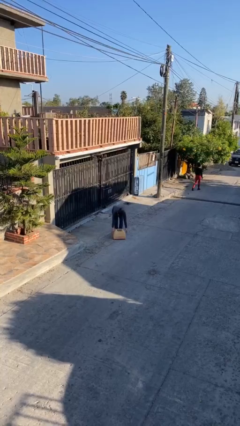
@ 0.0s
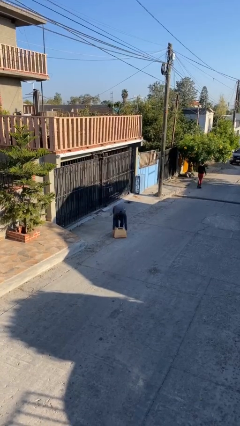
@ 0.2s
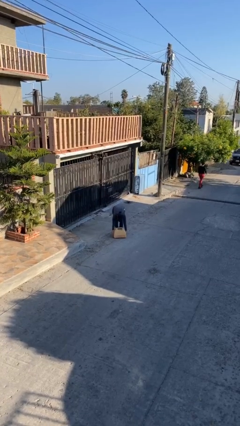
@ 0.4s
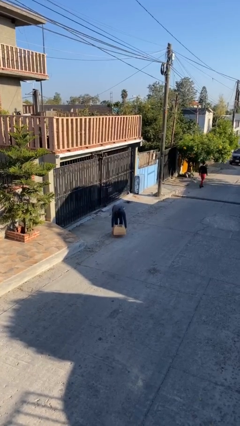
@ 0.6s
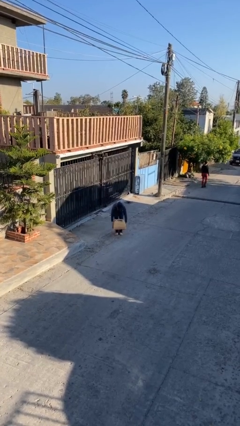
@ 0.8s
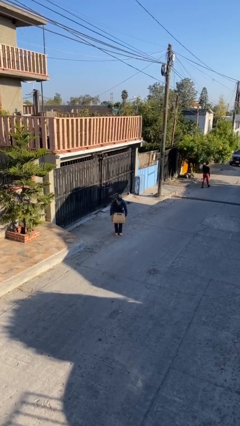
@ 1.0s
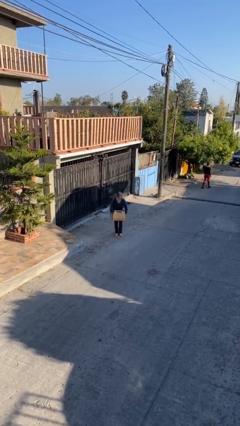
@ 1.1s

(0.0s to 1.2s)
person picks up object from floor

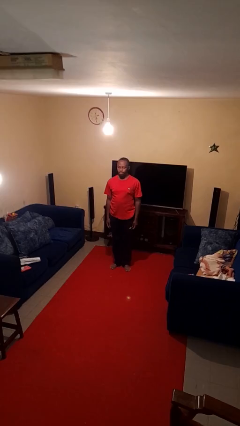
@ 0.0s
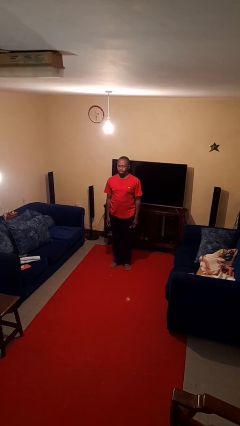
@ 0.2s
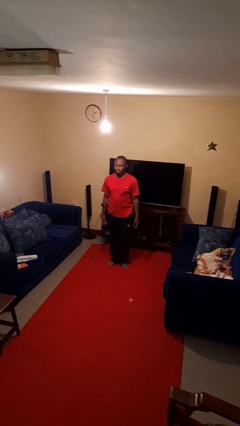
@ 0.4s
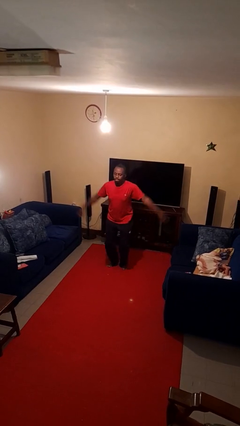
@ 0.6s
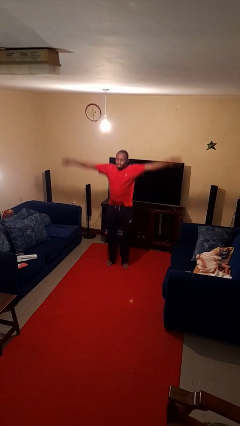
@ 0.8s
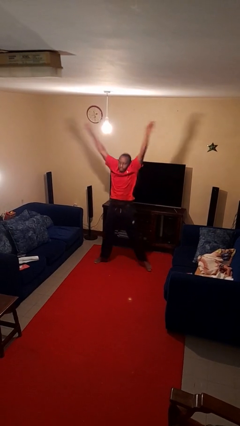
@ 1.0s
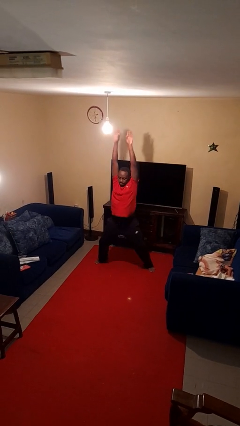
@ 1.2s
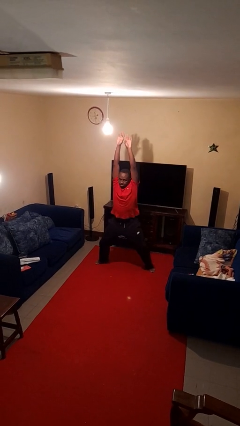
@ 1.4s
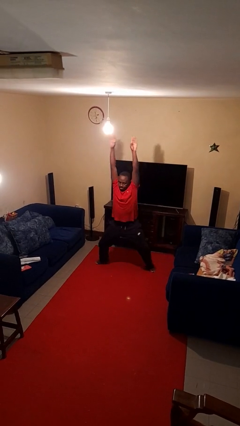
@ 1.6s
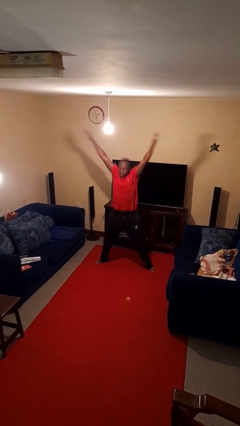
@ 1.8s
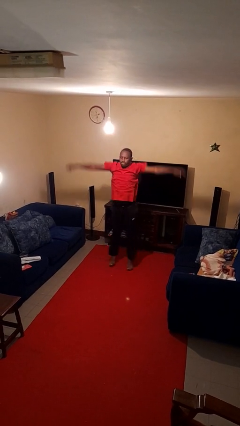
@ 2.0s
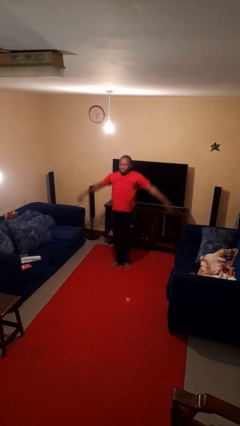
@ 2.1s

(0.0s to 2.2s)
person exercises with jumping jacks

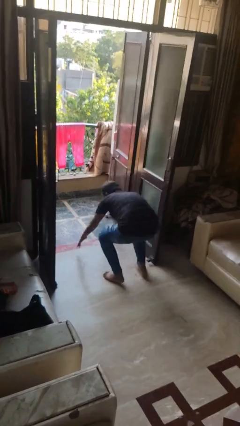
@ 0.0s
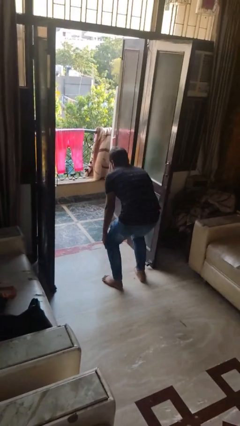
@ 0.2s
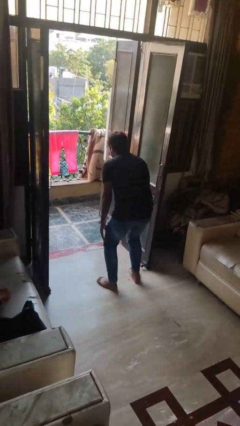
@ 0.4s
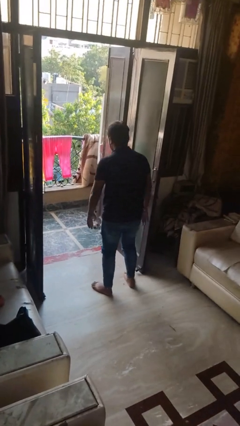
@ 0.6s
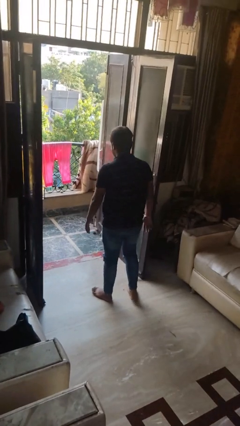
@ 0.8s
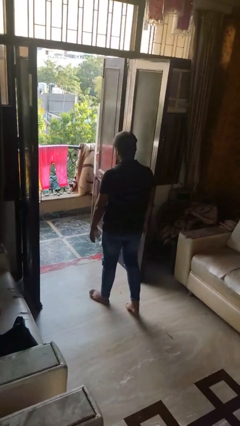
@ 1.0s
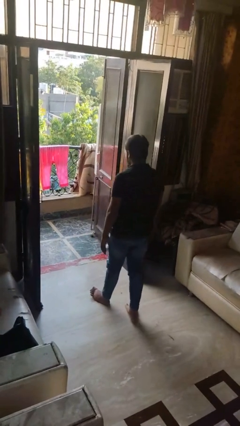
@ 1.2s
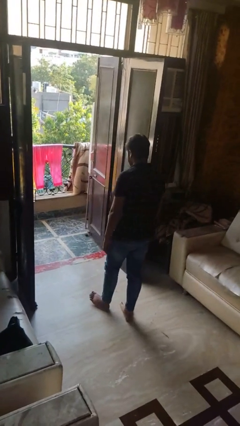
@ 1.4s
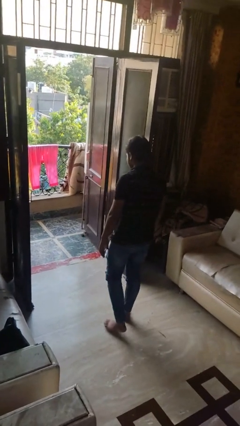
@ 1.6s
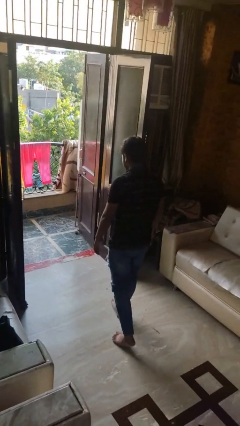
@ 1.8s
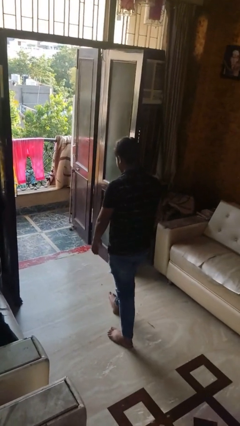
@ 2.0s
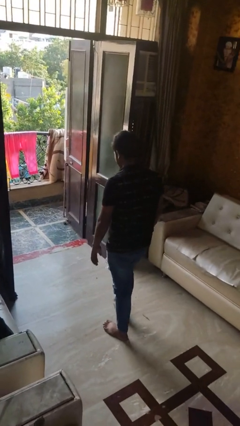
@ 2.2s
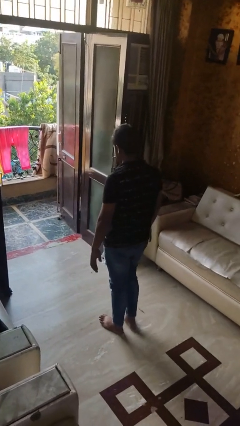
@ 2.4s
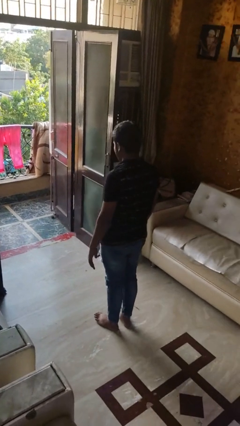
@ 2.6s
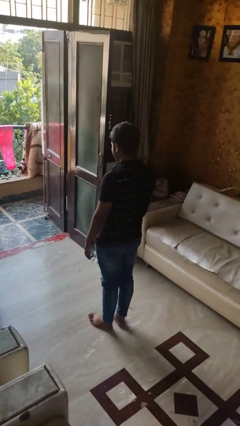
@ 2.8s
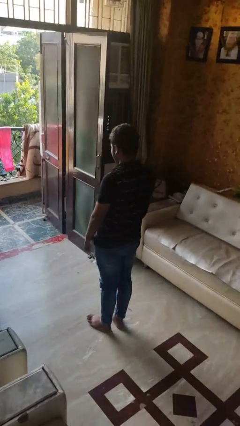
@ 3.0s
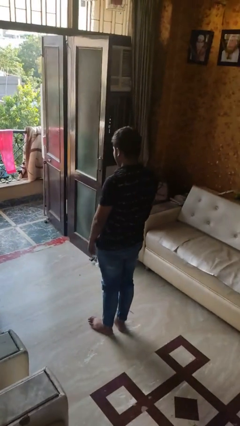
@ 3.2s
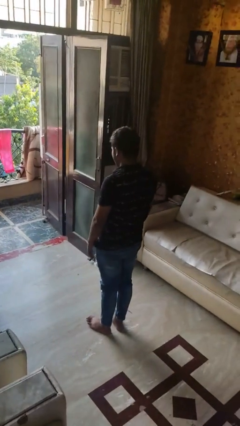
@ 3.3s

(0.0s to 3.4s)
person stands up from floor

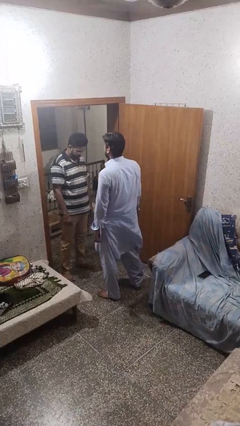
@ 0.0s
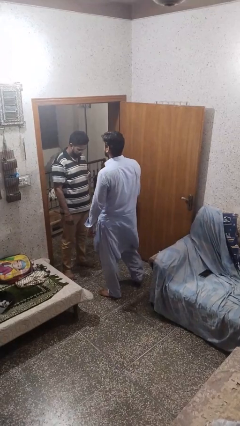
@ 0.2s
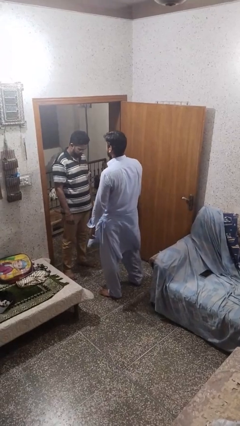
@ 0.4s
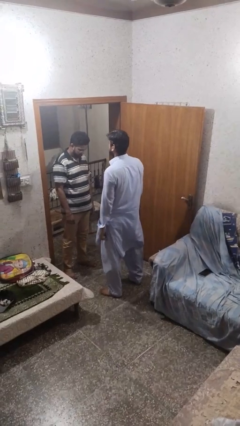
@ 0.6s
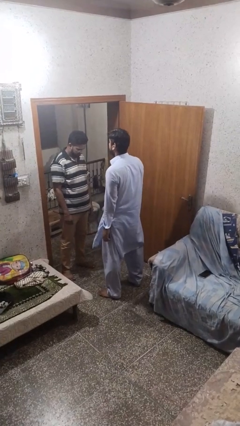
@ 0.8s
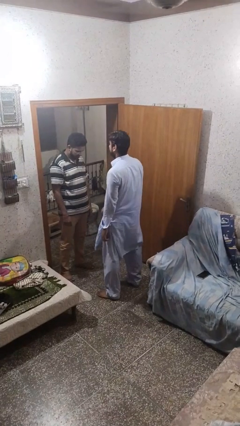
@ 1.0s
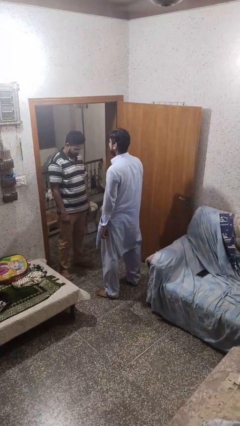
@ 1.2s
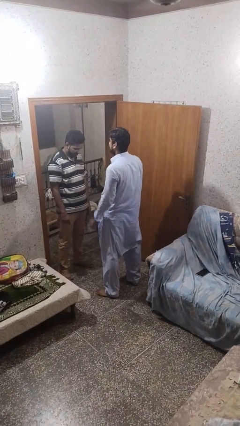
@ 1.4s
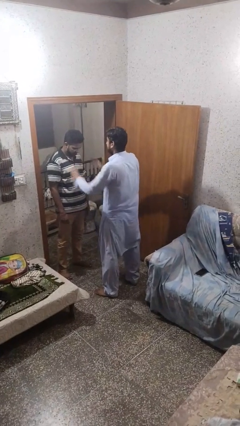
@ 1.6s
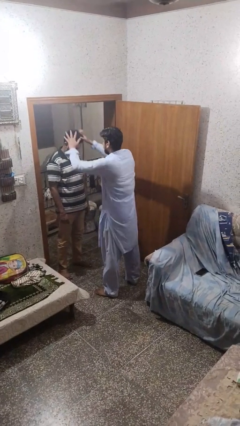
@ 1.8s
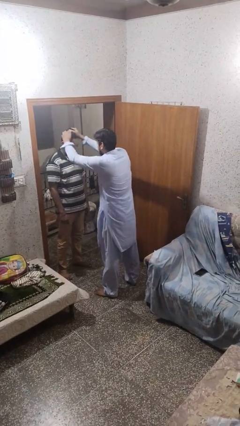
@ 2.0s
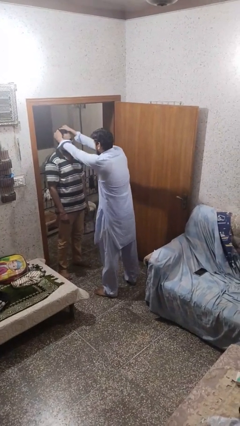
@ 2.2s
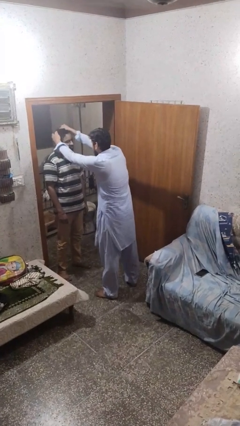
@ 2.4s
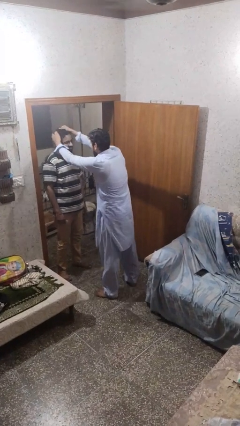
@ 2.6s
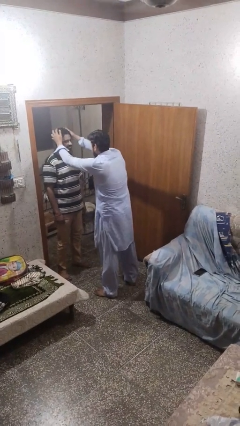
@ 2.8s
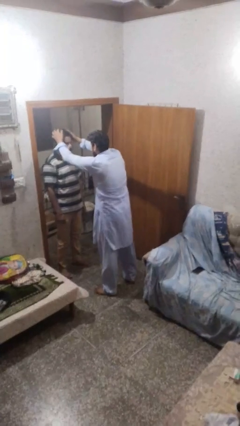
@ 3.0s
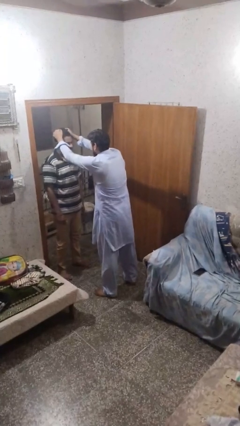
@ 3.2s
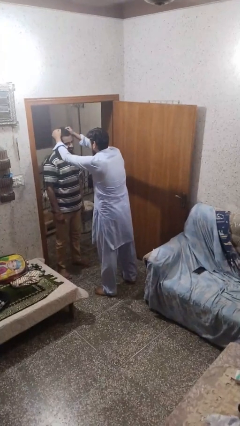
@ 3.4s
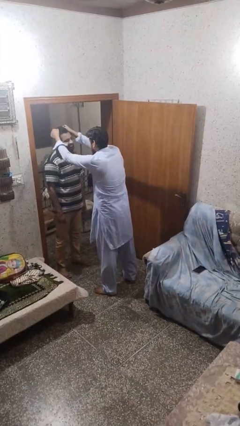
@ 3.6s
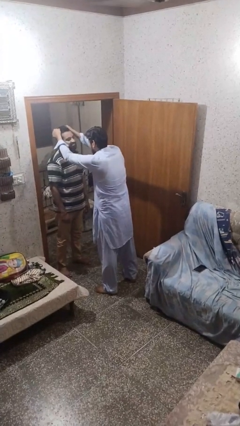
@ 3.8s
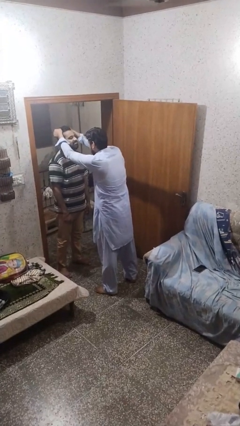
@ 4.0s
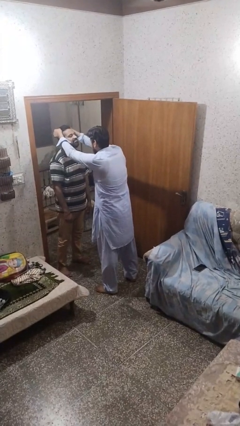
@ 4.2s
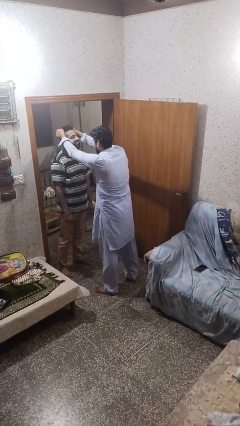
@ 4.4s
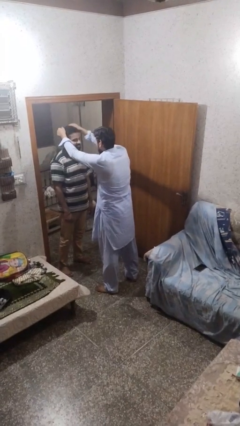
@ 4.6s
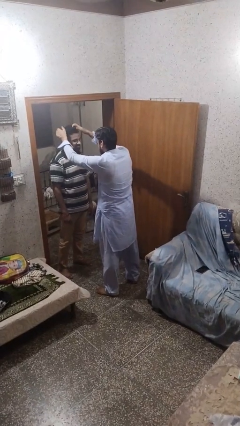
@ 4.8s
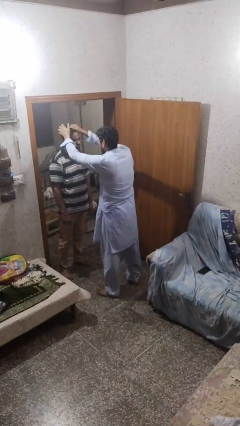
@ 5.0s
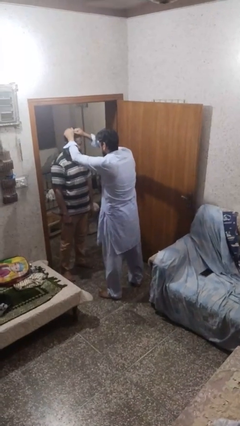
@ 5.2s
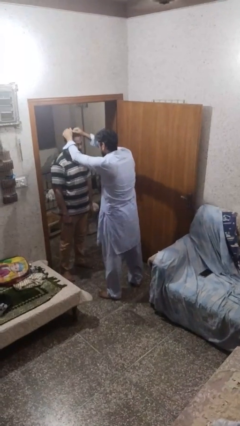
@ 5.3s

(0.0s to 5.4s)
person grabs person by hair

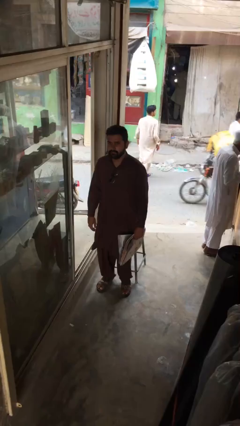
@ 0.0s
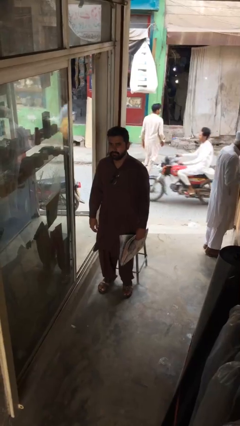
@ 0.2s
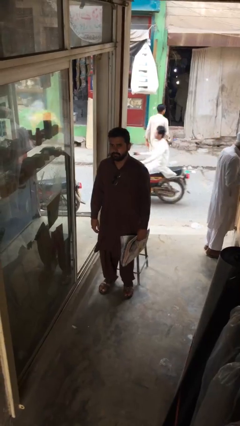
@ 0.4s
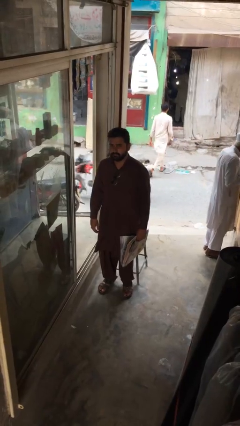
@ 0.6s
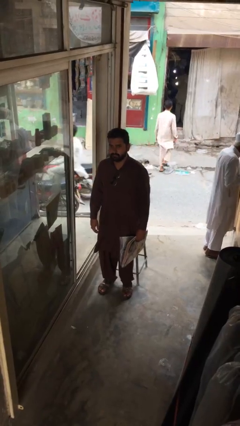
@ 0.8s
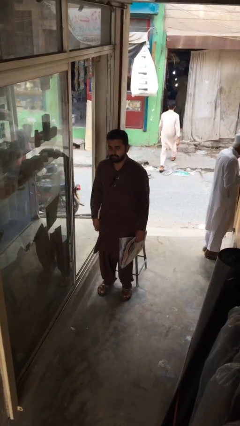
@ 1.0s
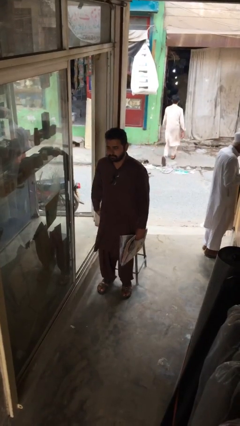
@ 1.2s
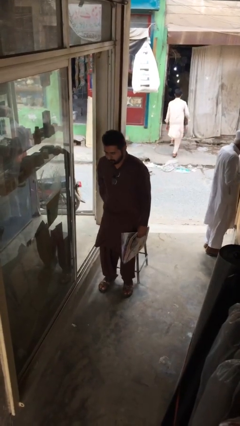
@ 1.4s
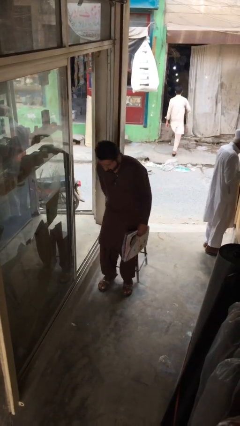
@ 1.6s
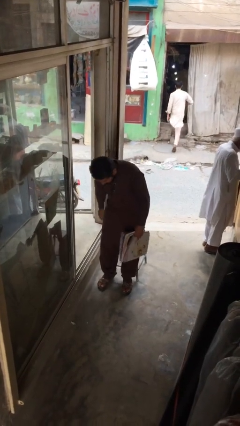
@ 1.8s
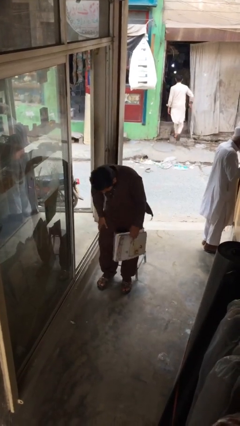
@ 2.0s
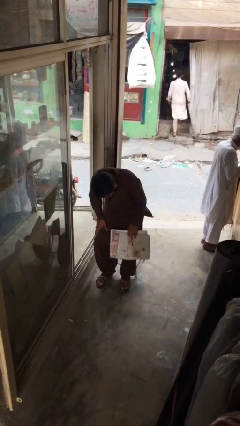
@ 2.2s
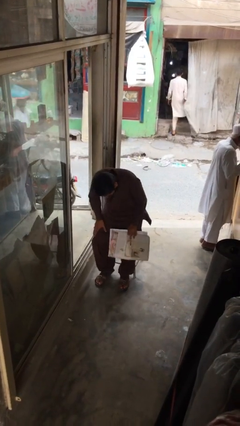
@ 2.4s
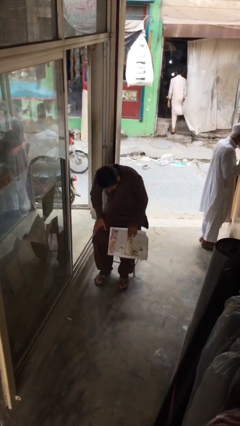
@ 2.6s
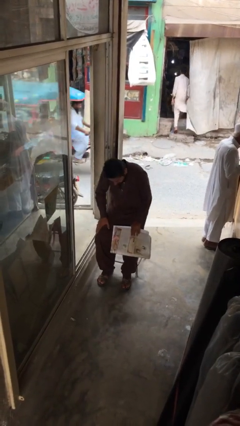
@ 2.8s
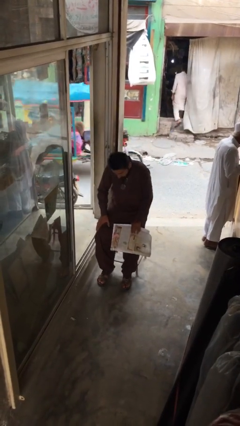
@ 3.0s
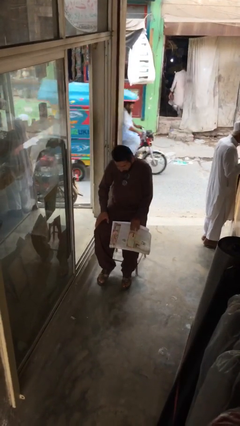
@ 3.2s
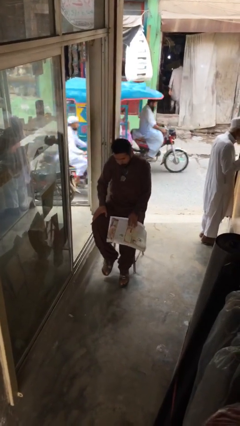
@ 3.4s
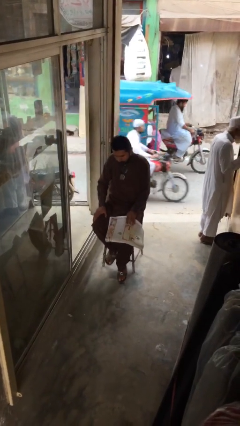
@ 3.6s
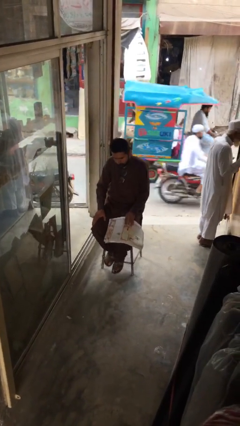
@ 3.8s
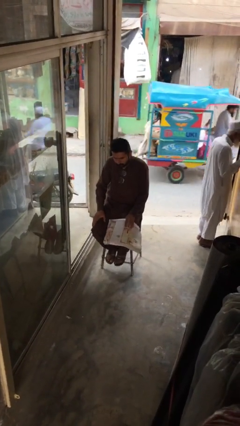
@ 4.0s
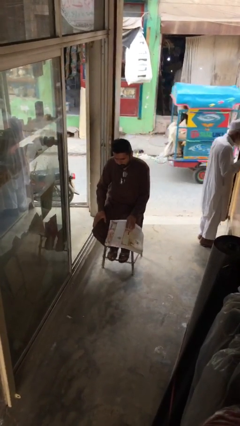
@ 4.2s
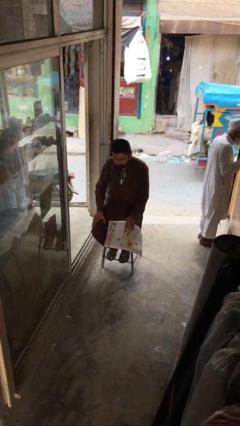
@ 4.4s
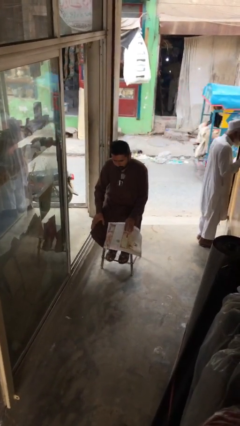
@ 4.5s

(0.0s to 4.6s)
person sits down

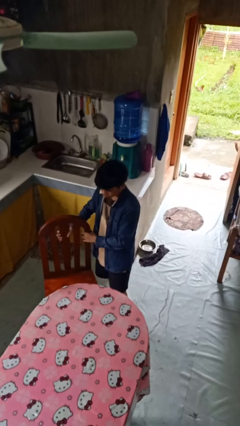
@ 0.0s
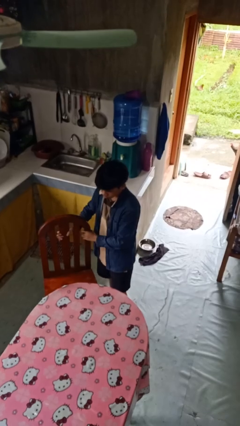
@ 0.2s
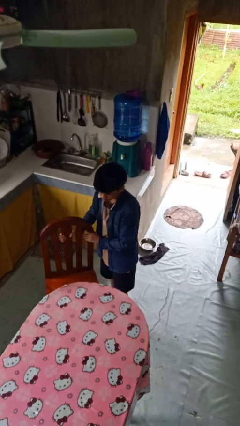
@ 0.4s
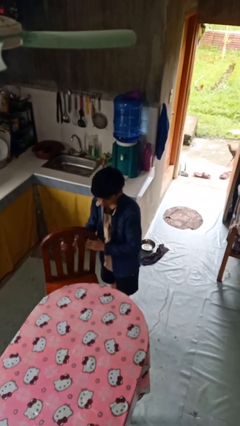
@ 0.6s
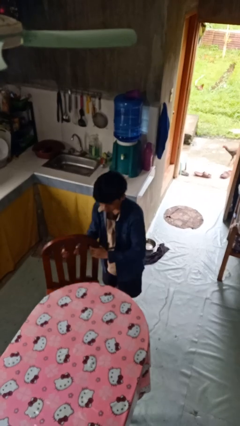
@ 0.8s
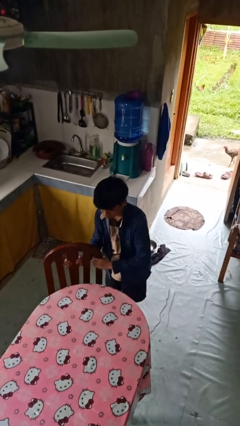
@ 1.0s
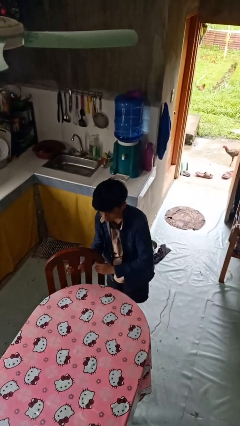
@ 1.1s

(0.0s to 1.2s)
person pushes in chair
